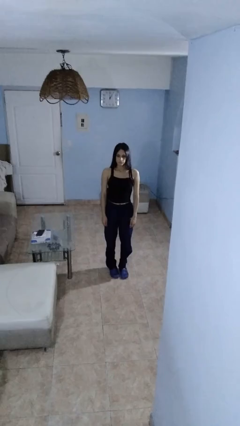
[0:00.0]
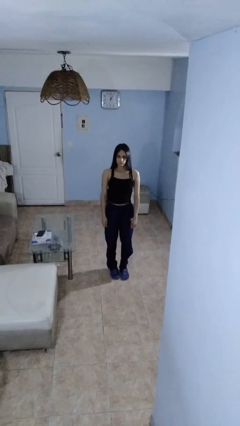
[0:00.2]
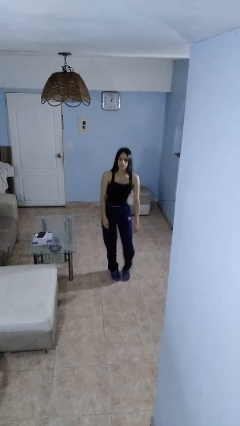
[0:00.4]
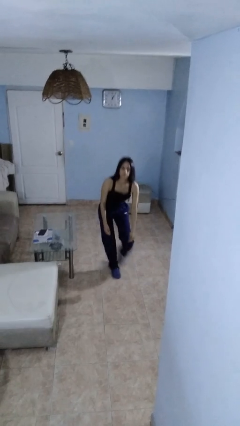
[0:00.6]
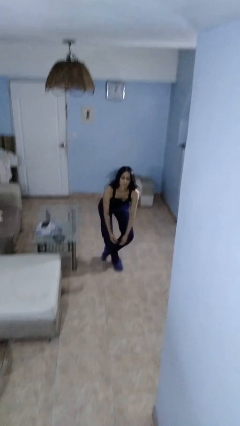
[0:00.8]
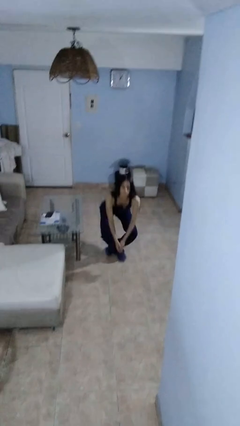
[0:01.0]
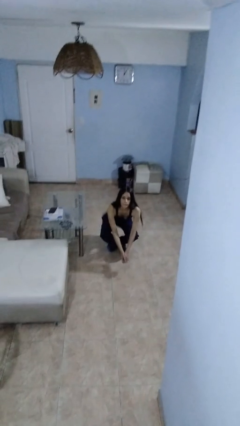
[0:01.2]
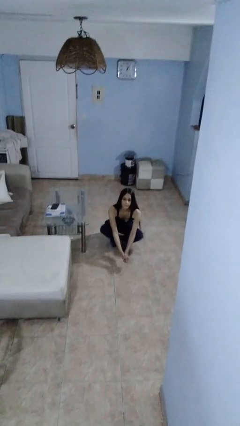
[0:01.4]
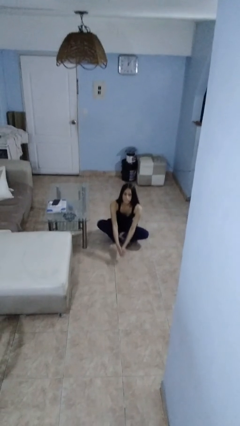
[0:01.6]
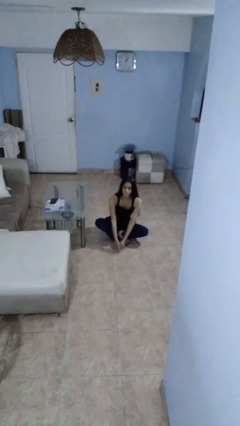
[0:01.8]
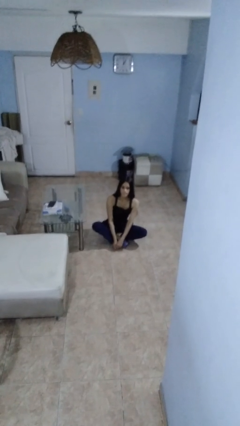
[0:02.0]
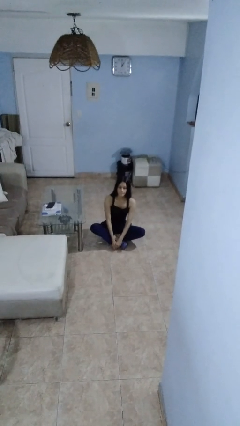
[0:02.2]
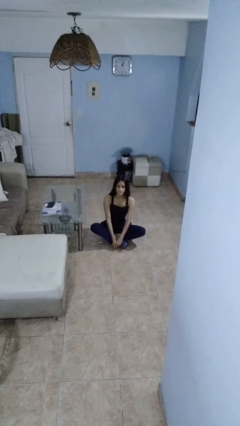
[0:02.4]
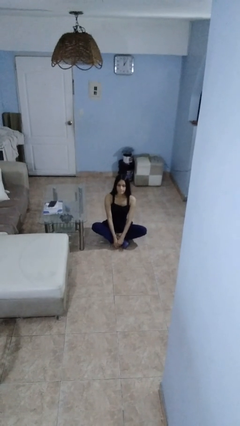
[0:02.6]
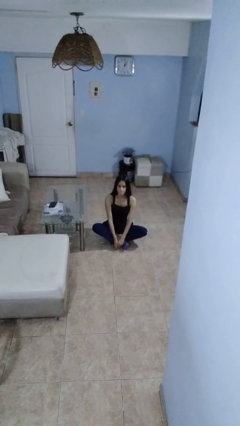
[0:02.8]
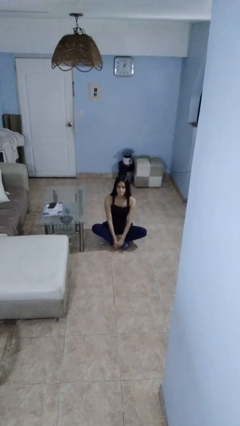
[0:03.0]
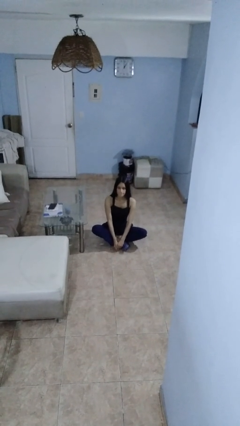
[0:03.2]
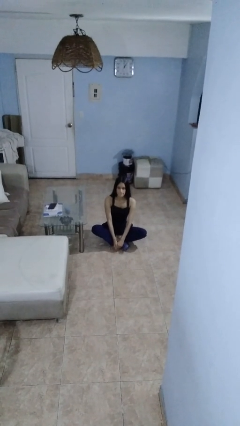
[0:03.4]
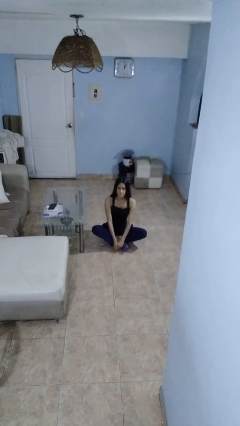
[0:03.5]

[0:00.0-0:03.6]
person sits crisscross

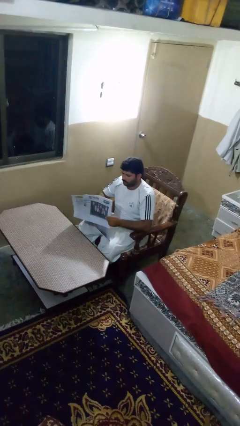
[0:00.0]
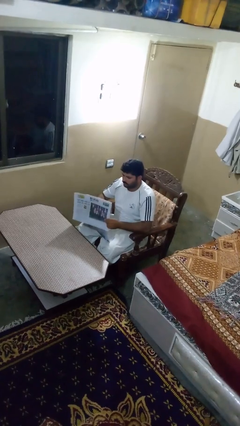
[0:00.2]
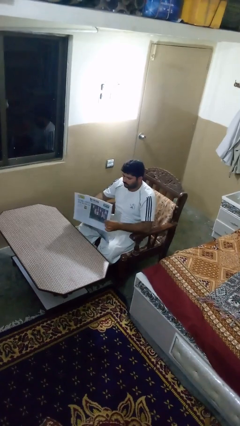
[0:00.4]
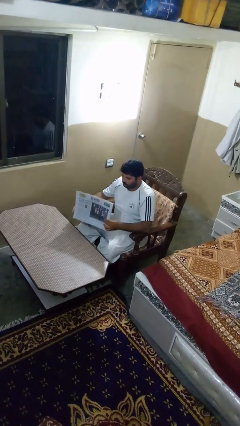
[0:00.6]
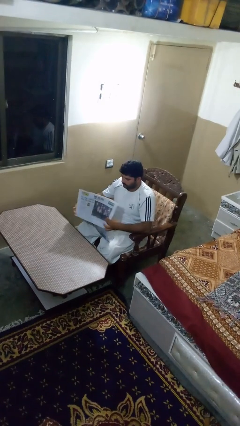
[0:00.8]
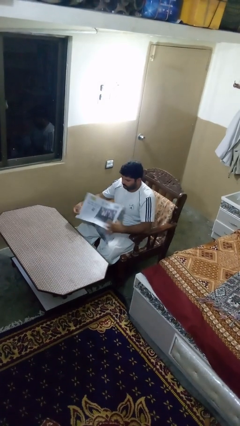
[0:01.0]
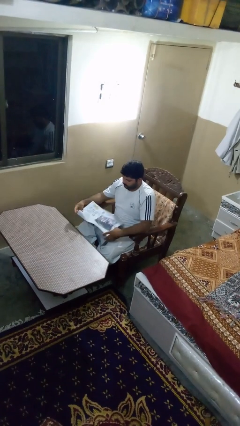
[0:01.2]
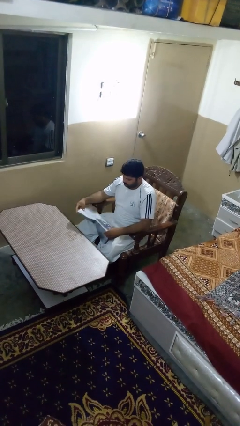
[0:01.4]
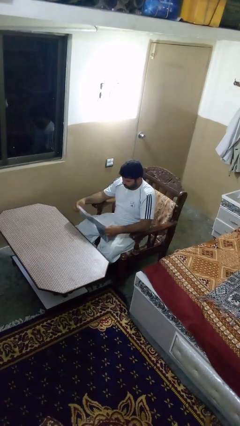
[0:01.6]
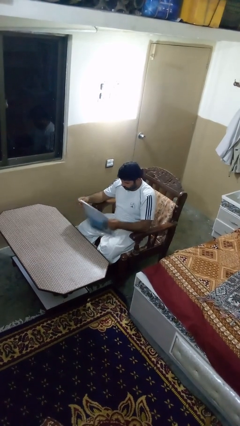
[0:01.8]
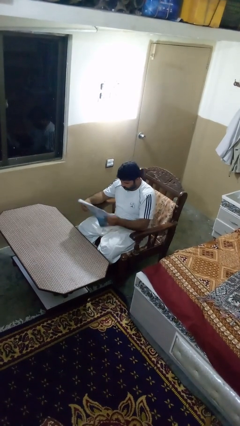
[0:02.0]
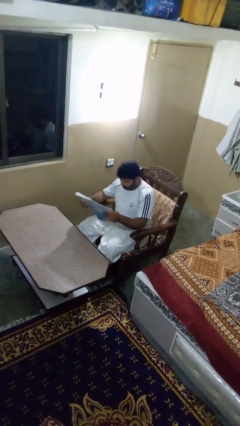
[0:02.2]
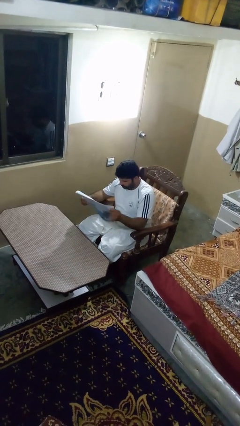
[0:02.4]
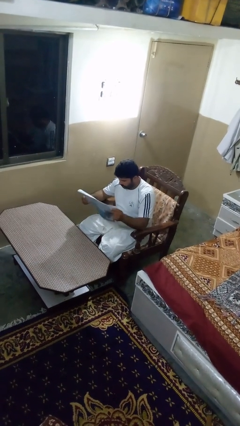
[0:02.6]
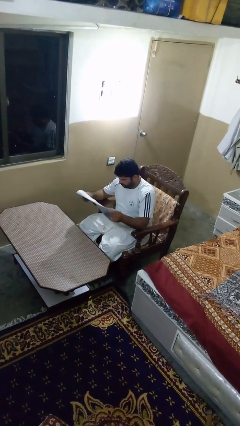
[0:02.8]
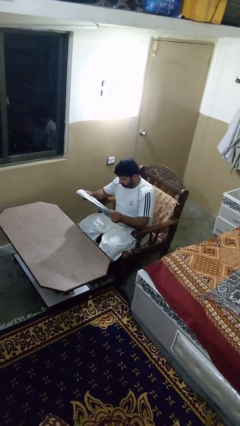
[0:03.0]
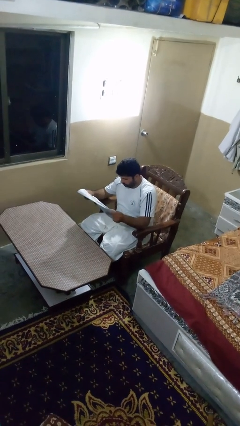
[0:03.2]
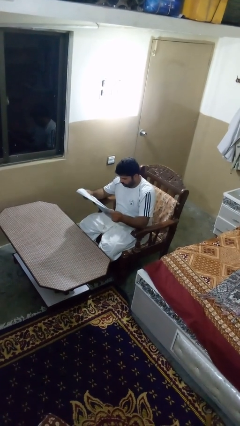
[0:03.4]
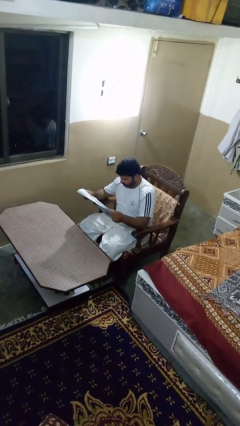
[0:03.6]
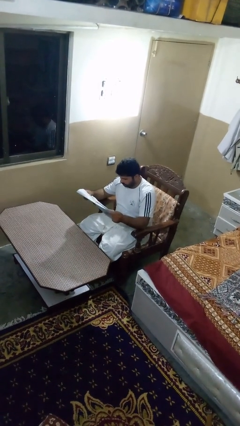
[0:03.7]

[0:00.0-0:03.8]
person reads newspaper

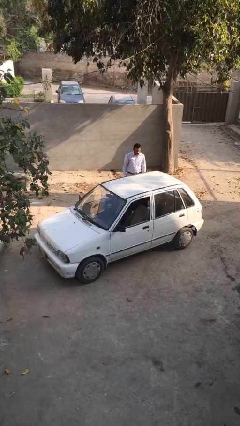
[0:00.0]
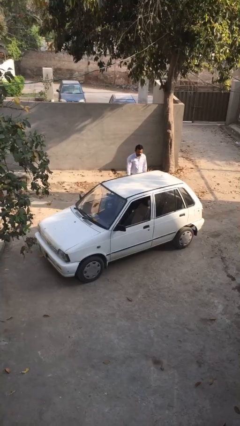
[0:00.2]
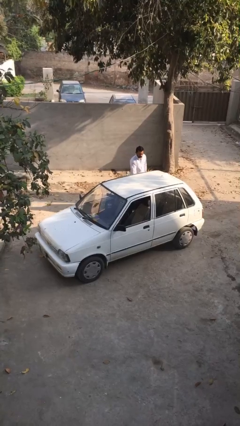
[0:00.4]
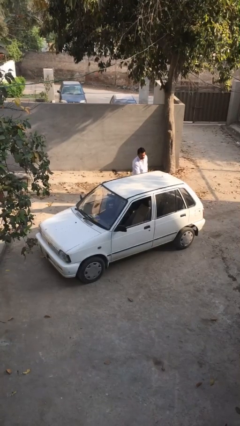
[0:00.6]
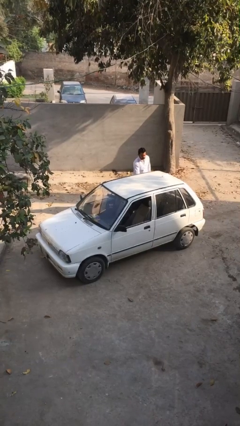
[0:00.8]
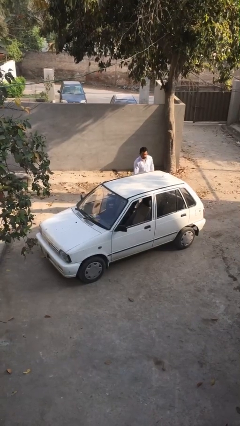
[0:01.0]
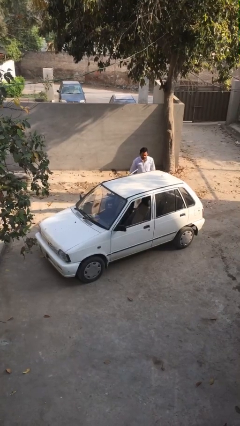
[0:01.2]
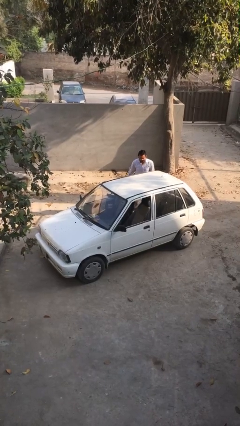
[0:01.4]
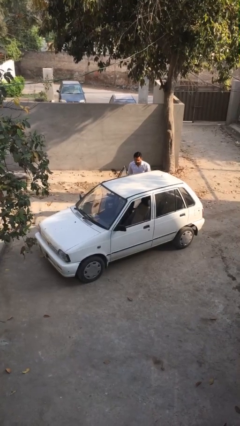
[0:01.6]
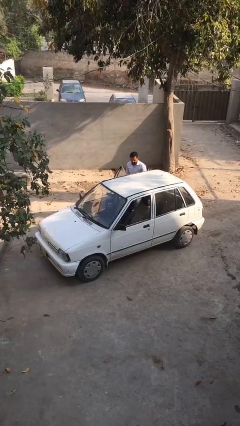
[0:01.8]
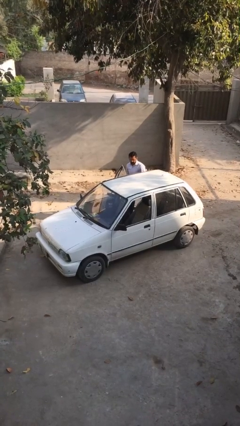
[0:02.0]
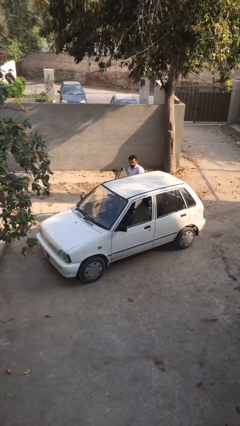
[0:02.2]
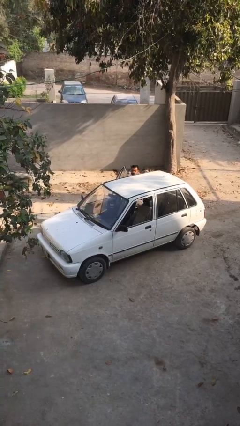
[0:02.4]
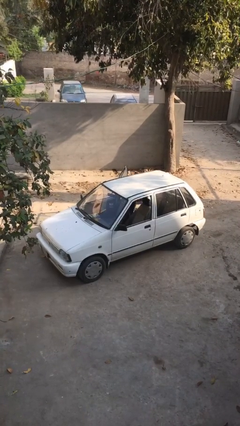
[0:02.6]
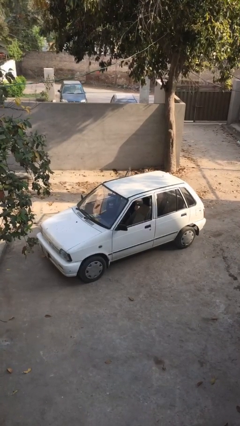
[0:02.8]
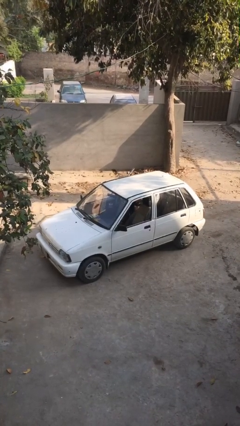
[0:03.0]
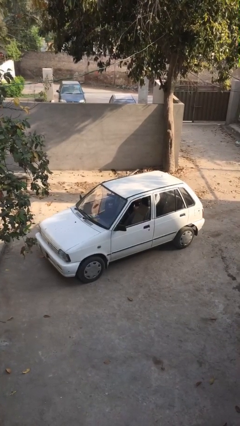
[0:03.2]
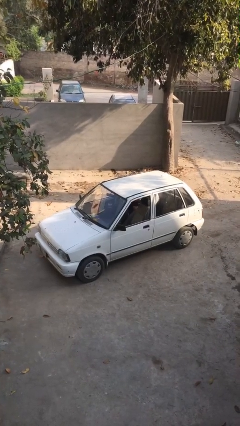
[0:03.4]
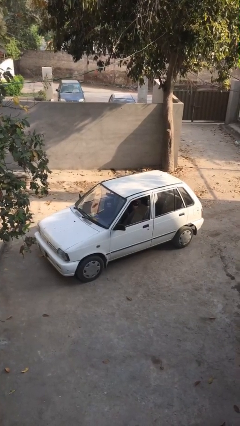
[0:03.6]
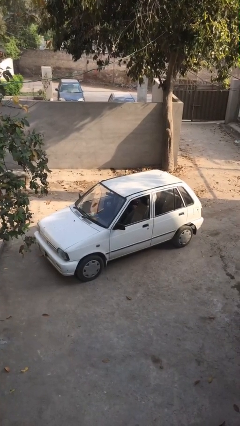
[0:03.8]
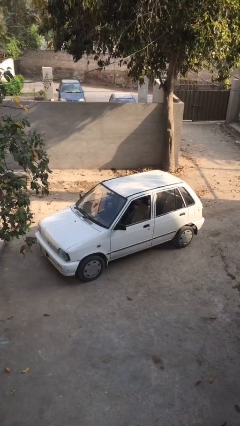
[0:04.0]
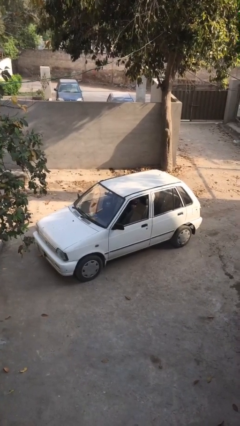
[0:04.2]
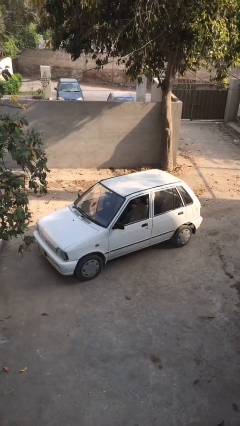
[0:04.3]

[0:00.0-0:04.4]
car picks up person

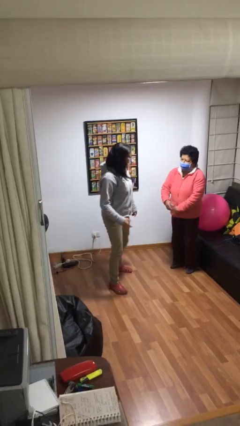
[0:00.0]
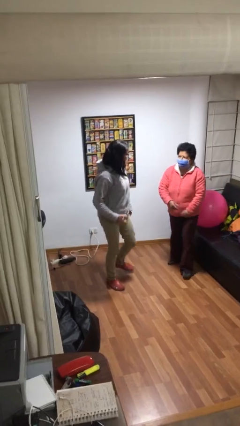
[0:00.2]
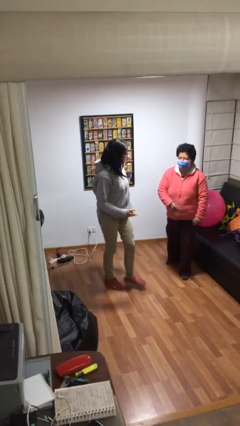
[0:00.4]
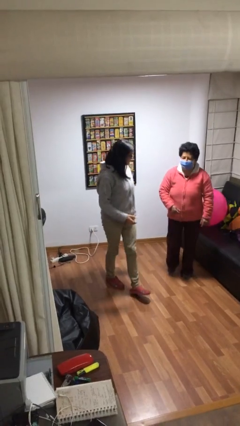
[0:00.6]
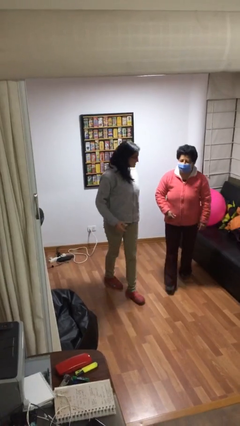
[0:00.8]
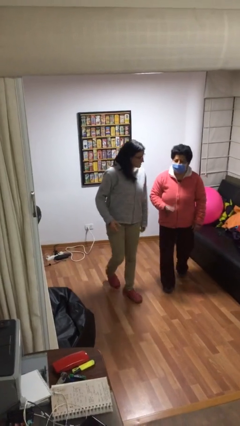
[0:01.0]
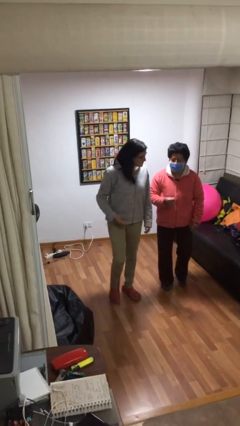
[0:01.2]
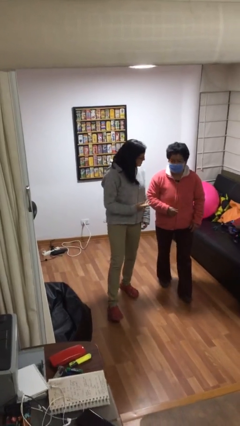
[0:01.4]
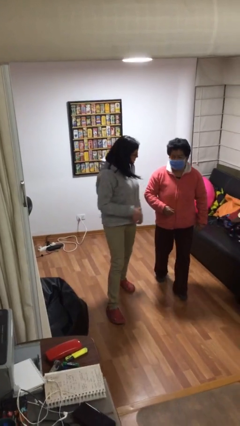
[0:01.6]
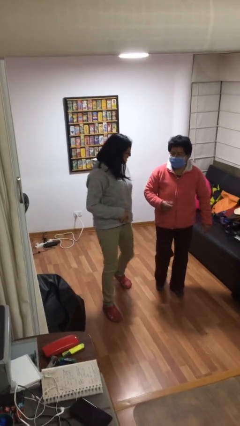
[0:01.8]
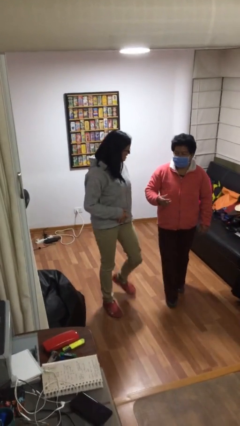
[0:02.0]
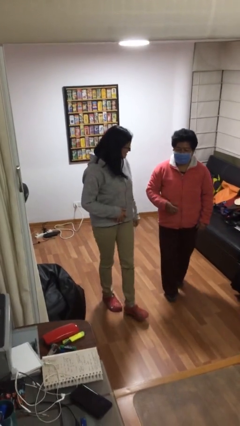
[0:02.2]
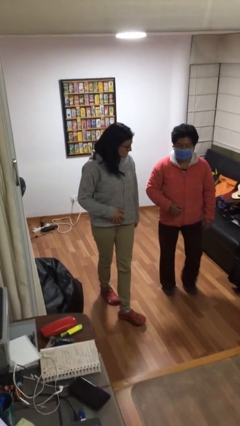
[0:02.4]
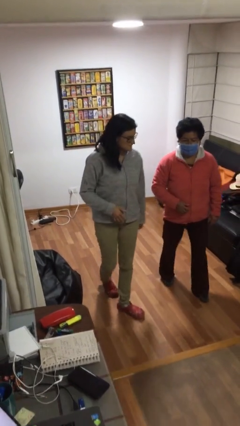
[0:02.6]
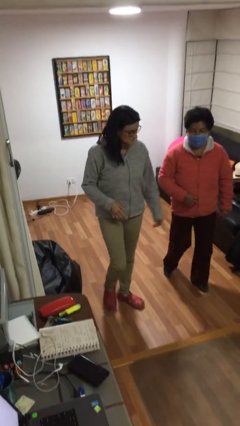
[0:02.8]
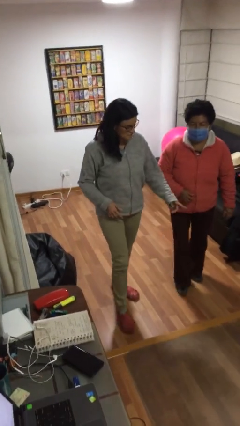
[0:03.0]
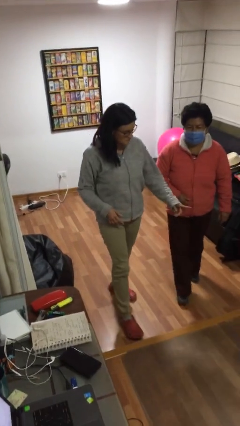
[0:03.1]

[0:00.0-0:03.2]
person talks to person

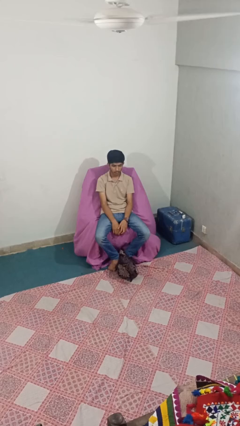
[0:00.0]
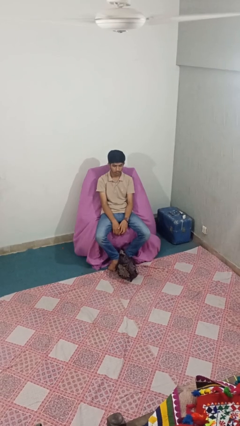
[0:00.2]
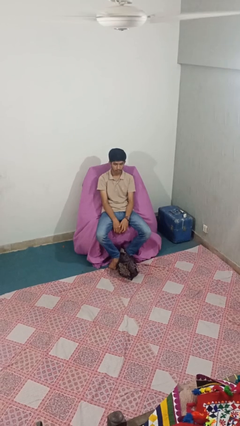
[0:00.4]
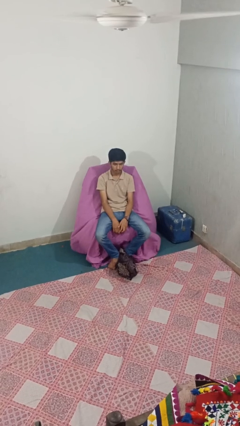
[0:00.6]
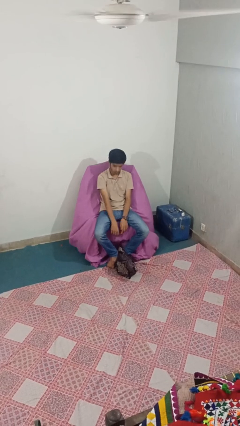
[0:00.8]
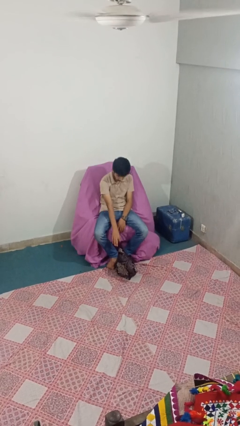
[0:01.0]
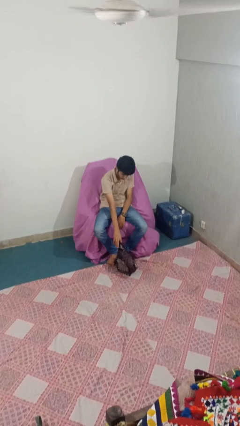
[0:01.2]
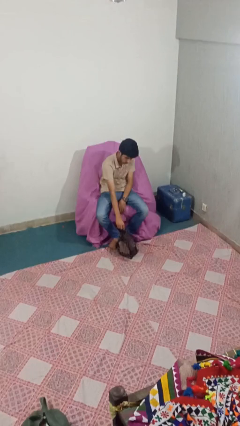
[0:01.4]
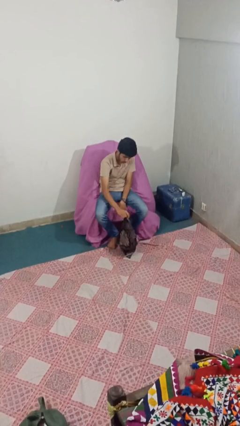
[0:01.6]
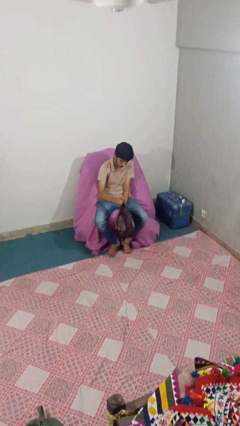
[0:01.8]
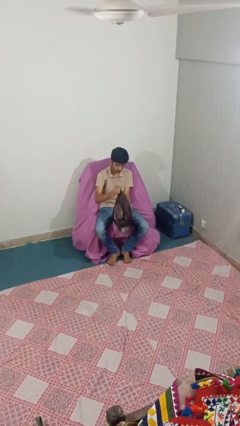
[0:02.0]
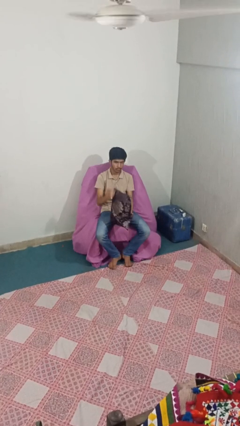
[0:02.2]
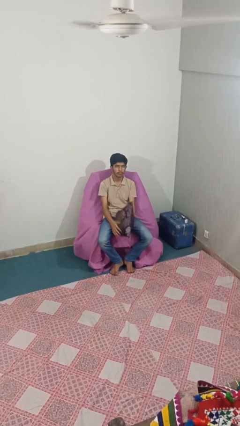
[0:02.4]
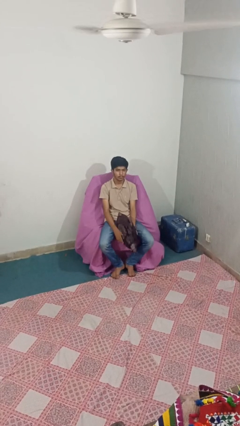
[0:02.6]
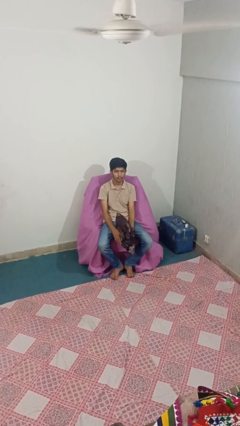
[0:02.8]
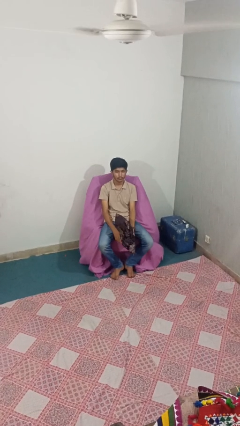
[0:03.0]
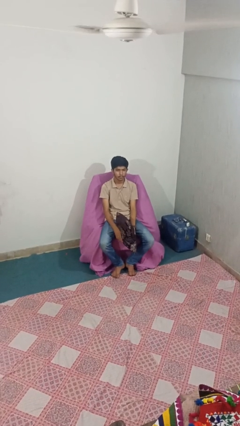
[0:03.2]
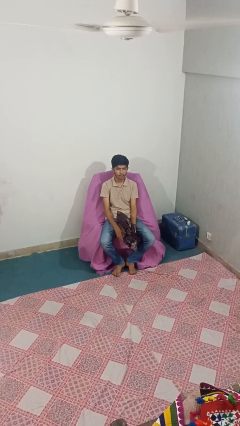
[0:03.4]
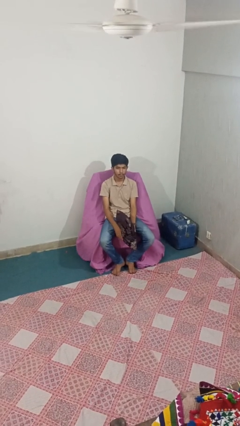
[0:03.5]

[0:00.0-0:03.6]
person picks up object from floor
